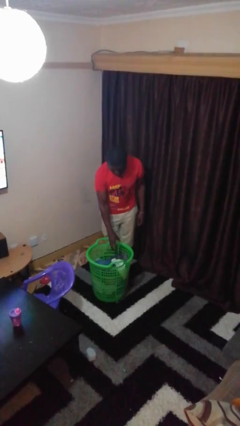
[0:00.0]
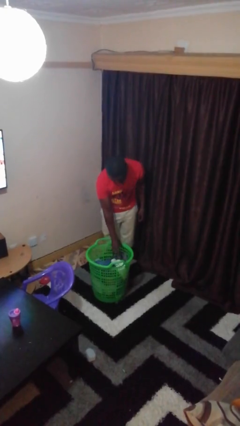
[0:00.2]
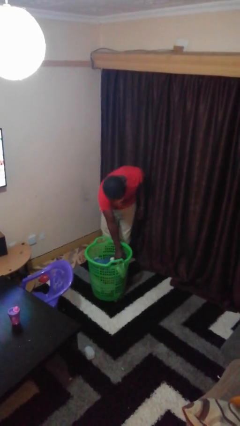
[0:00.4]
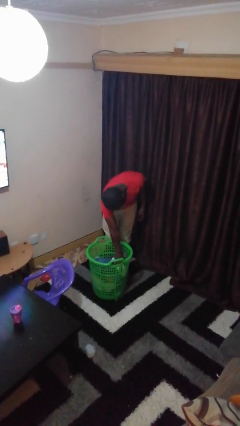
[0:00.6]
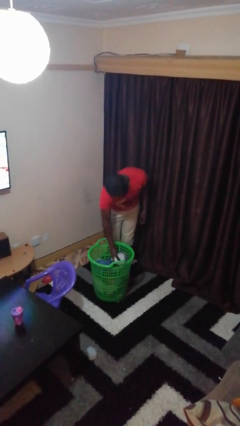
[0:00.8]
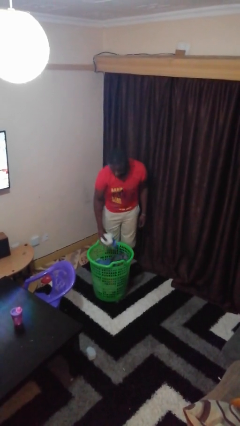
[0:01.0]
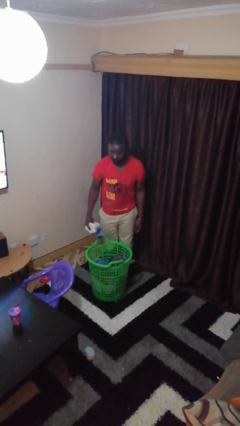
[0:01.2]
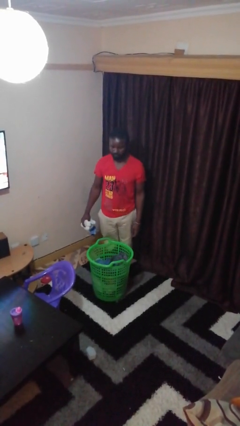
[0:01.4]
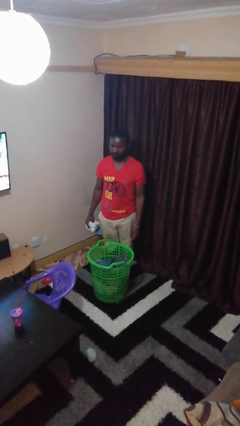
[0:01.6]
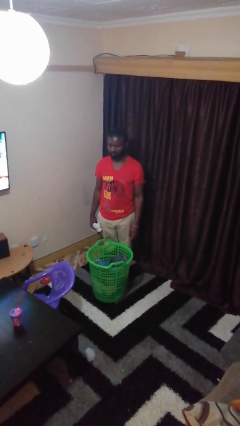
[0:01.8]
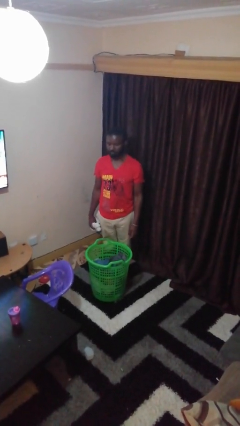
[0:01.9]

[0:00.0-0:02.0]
person takes object from basket

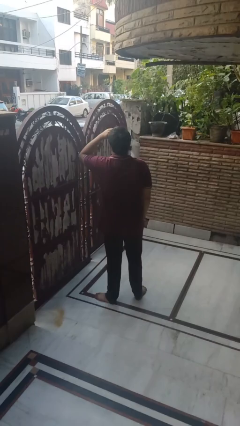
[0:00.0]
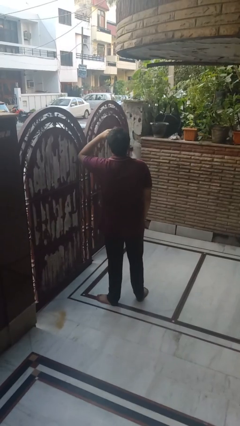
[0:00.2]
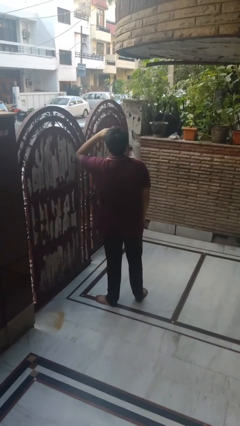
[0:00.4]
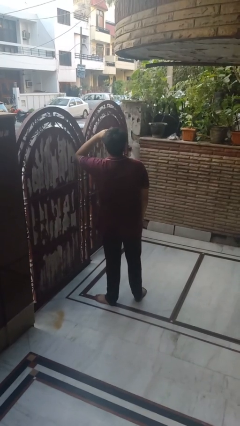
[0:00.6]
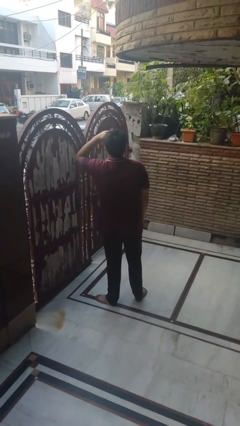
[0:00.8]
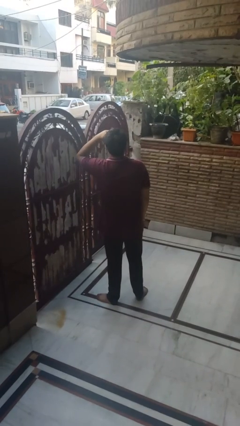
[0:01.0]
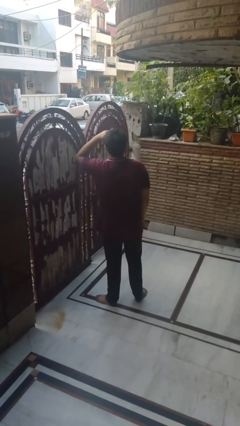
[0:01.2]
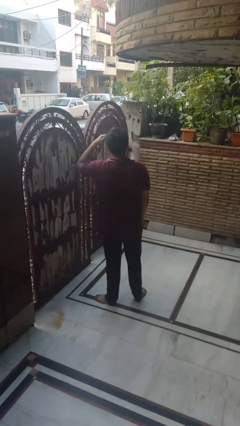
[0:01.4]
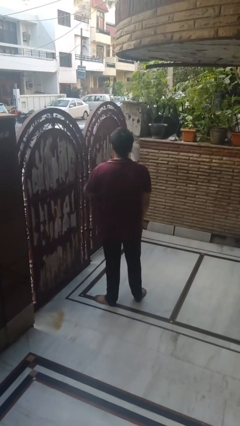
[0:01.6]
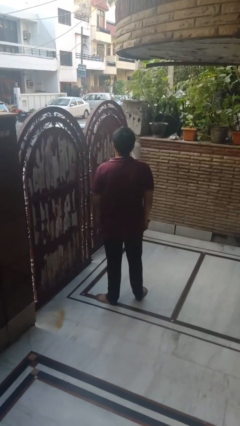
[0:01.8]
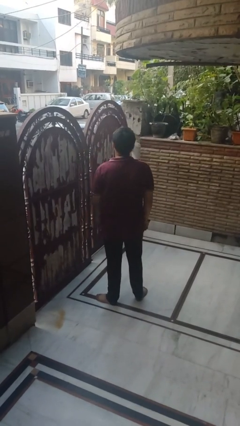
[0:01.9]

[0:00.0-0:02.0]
person shades eyes

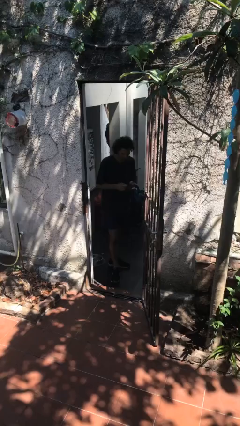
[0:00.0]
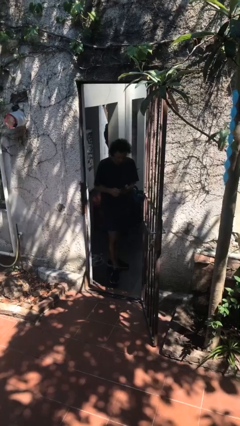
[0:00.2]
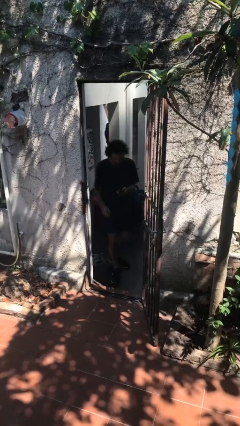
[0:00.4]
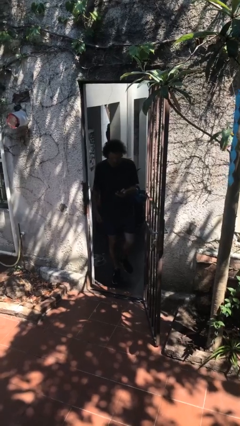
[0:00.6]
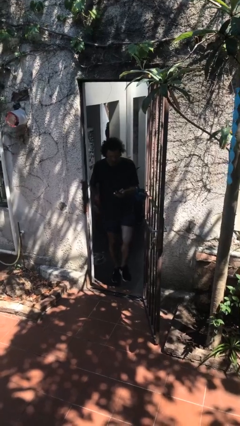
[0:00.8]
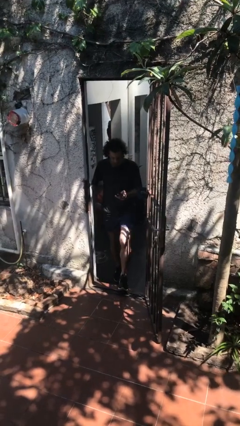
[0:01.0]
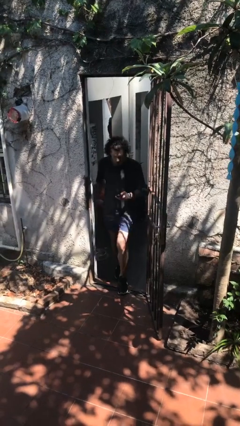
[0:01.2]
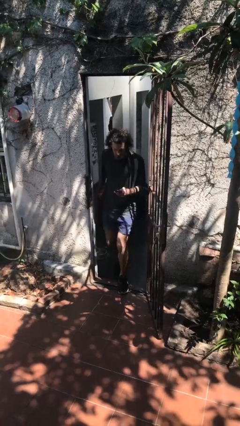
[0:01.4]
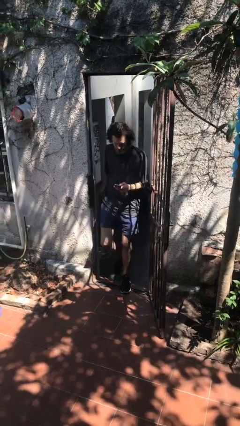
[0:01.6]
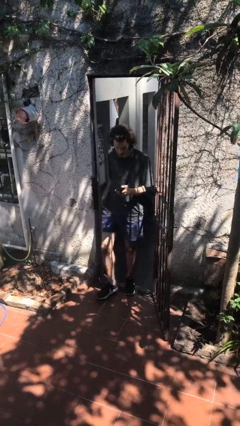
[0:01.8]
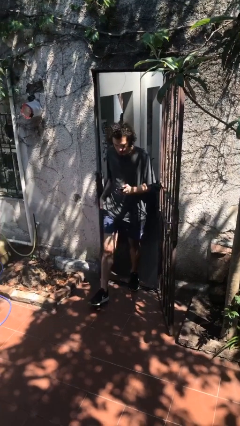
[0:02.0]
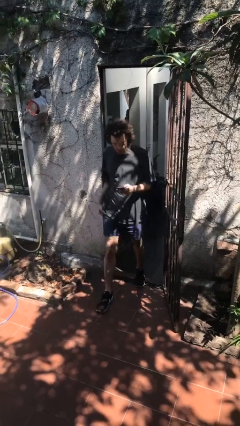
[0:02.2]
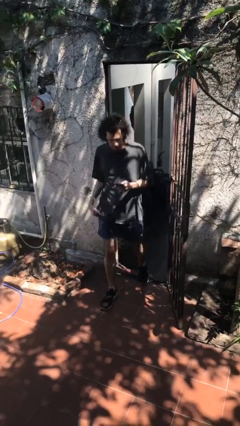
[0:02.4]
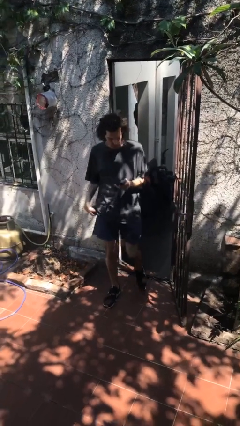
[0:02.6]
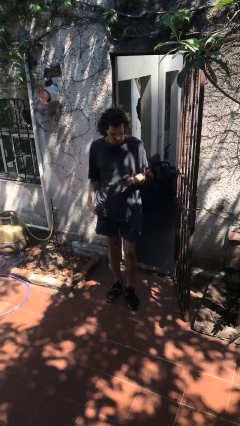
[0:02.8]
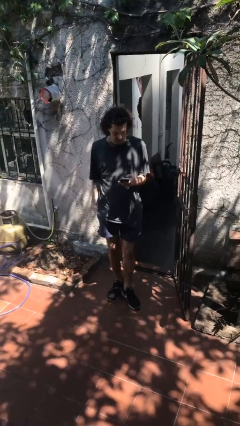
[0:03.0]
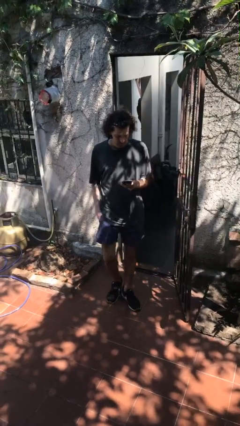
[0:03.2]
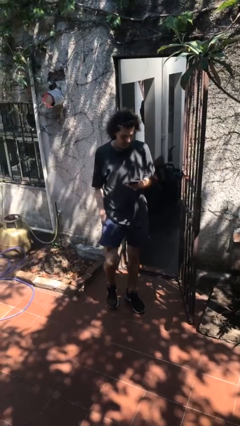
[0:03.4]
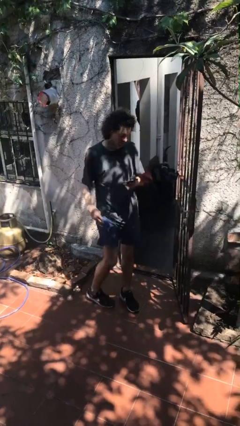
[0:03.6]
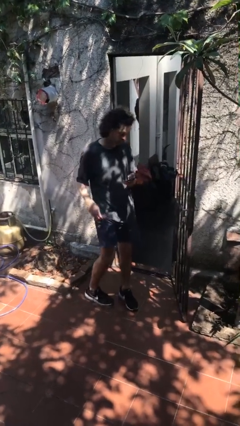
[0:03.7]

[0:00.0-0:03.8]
person enters scene through structure

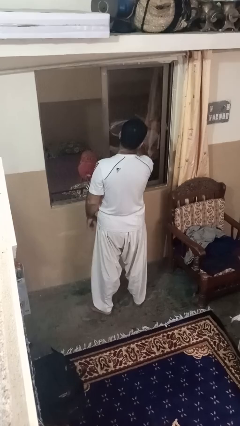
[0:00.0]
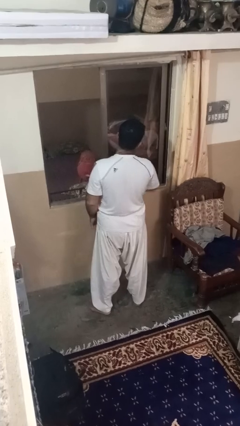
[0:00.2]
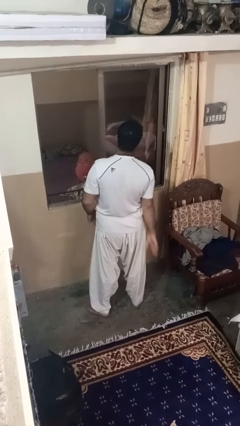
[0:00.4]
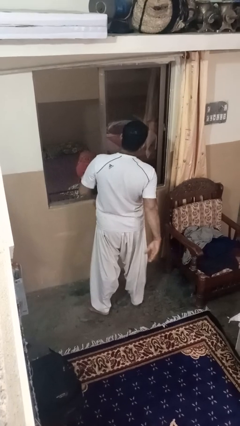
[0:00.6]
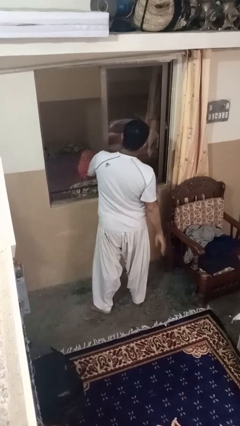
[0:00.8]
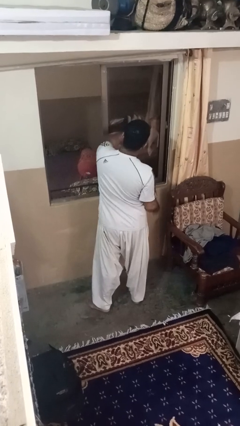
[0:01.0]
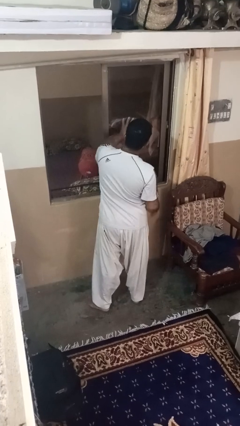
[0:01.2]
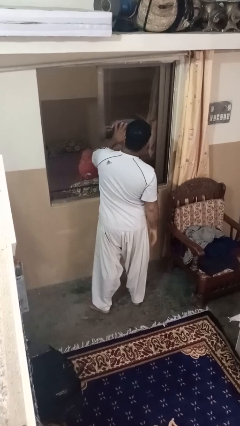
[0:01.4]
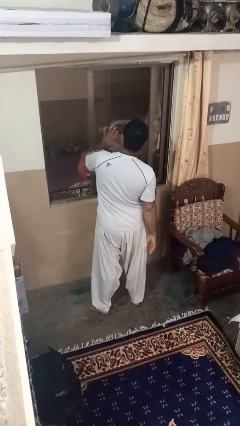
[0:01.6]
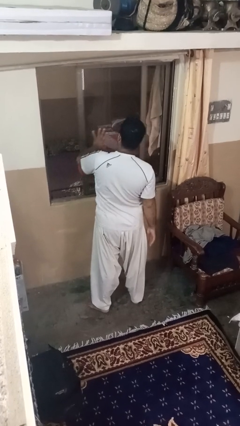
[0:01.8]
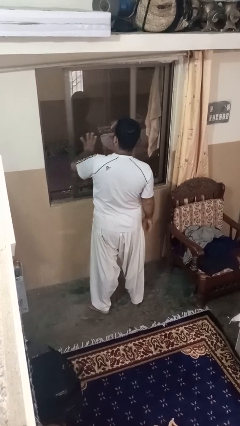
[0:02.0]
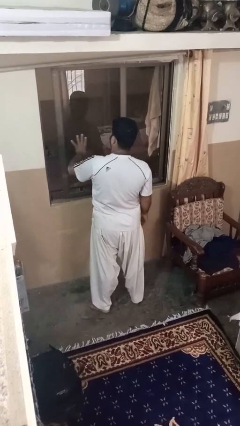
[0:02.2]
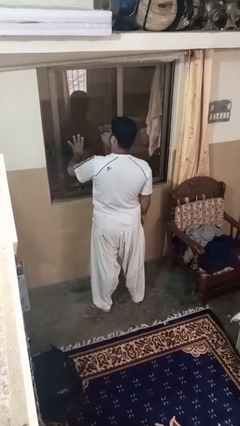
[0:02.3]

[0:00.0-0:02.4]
person closes home window

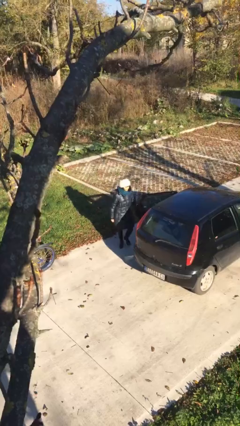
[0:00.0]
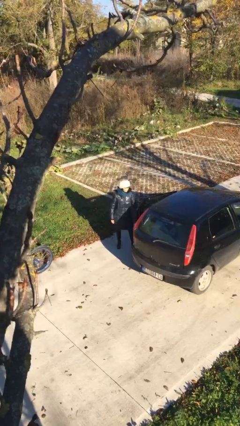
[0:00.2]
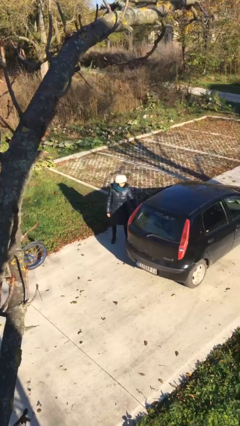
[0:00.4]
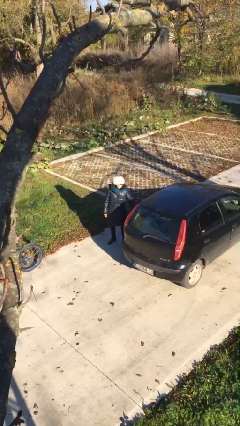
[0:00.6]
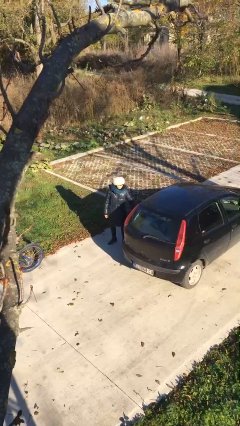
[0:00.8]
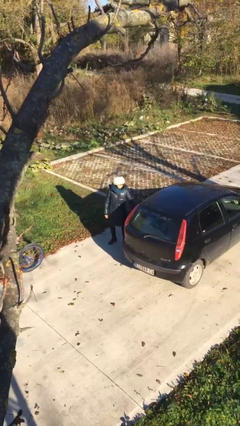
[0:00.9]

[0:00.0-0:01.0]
person closes car door

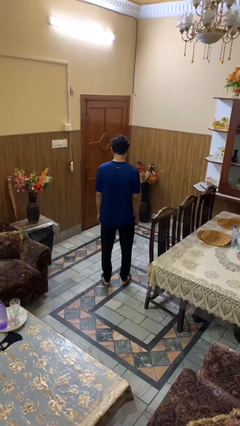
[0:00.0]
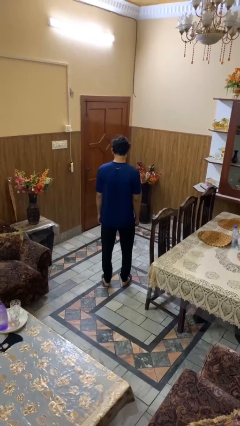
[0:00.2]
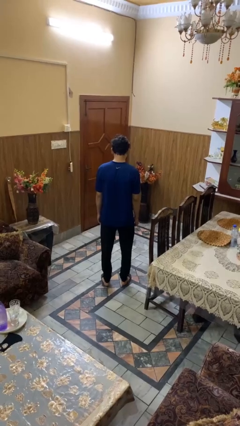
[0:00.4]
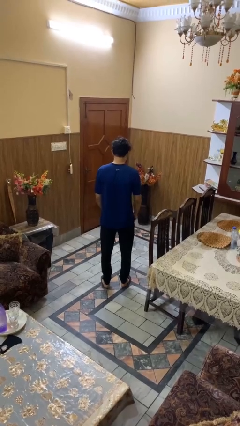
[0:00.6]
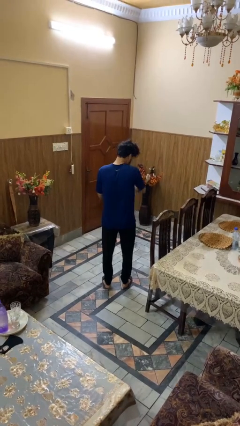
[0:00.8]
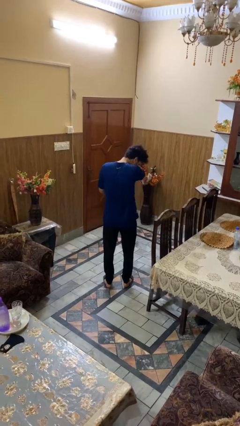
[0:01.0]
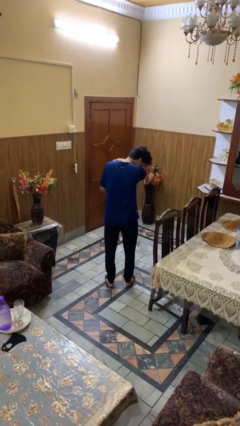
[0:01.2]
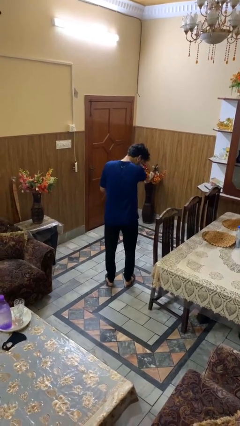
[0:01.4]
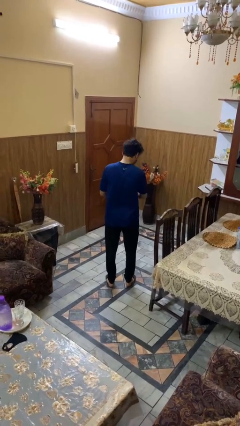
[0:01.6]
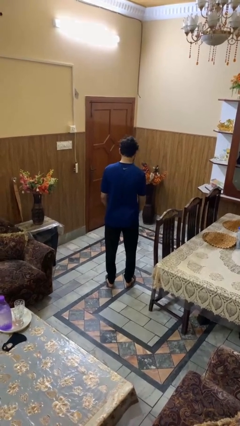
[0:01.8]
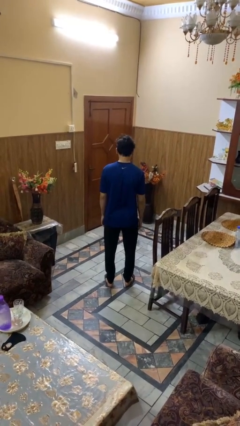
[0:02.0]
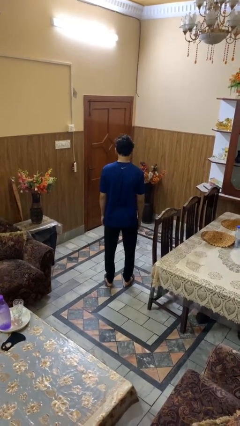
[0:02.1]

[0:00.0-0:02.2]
person sneezes into arm

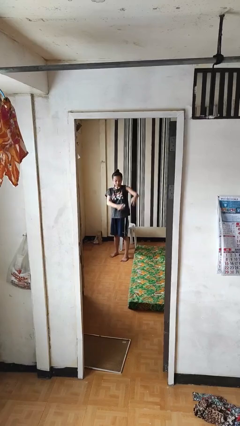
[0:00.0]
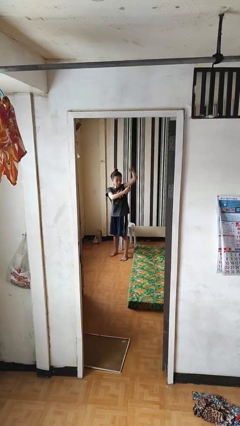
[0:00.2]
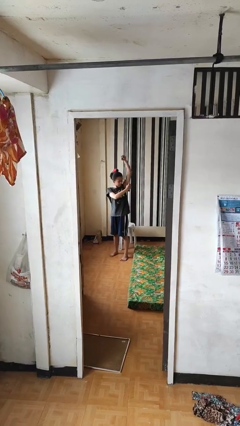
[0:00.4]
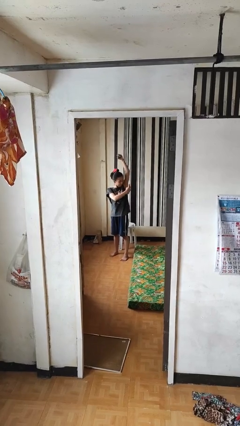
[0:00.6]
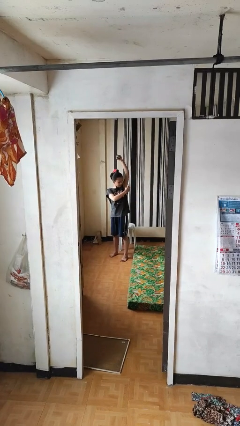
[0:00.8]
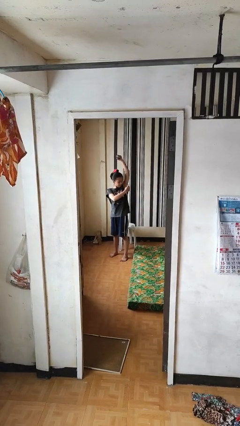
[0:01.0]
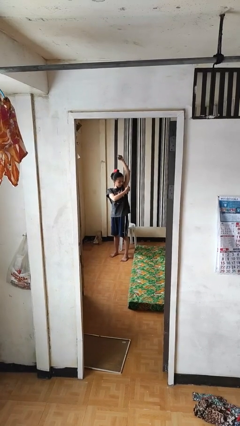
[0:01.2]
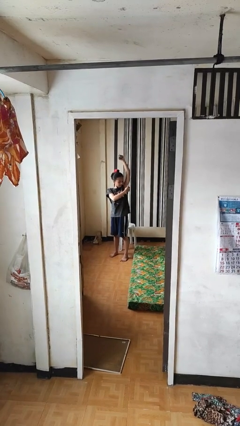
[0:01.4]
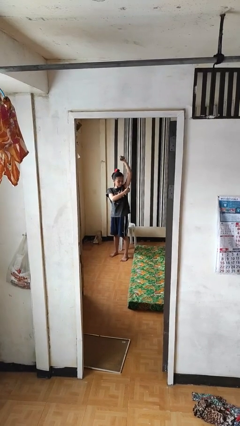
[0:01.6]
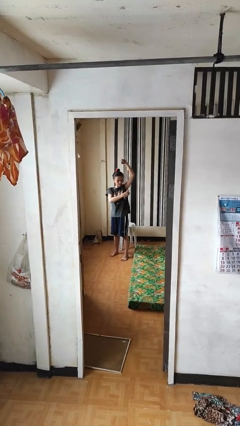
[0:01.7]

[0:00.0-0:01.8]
person applies deodorant

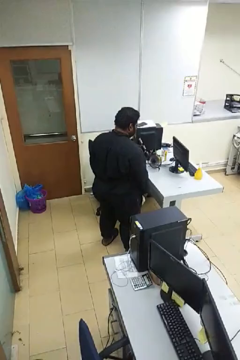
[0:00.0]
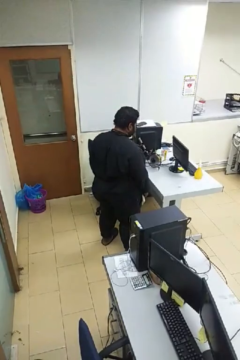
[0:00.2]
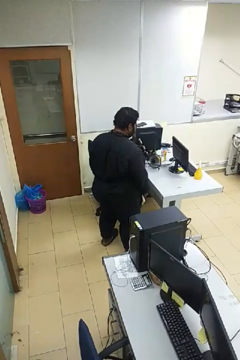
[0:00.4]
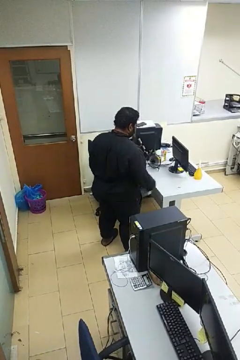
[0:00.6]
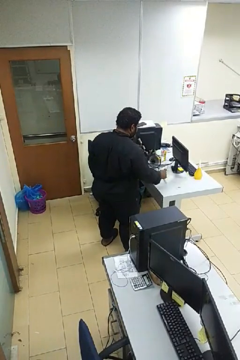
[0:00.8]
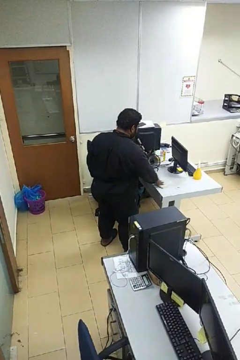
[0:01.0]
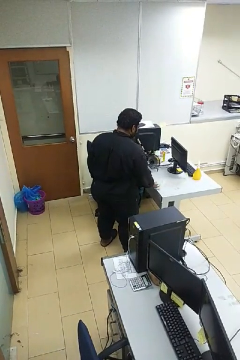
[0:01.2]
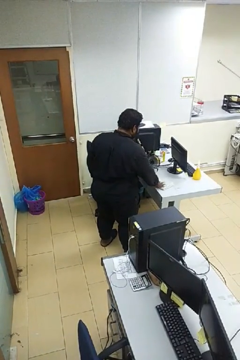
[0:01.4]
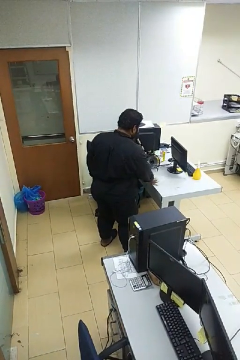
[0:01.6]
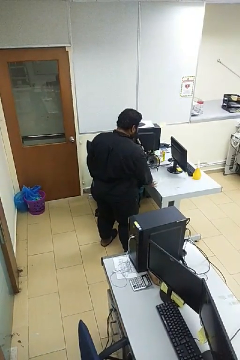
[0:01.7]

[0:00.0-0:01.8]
person cleans table with rag
